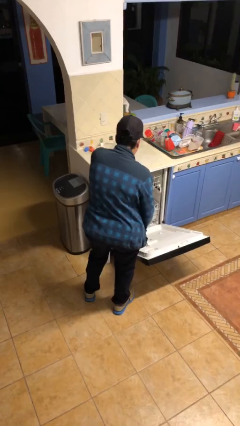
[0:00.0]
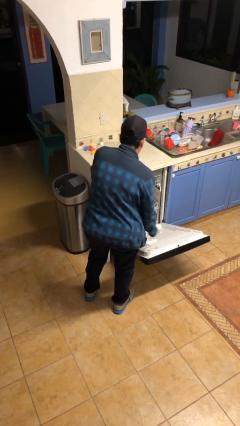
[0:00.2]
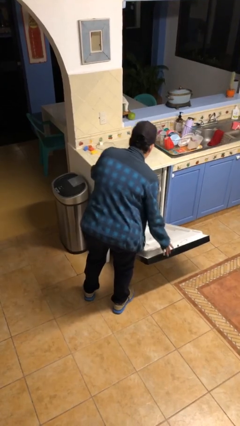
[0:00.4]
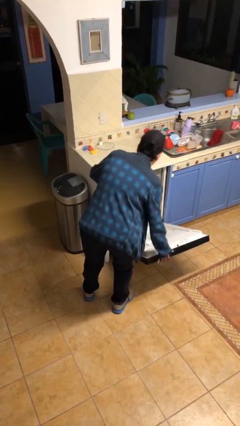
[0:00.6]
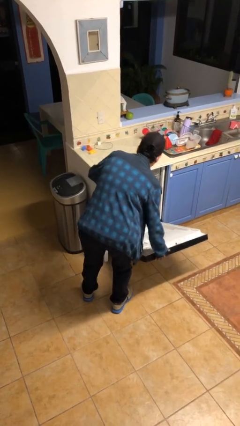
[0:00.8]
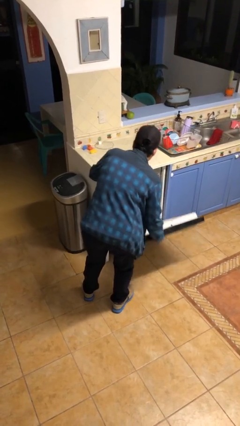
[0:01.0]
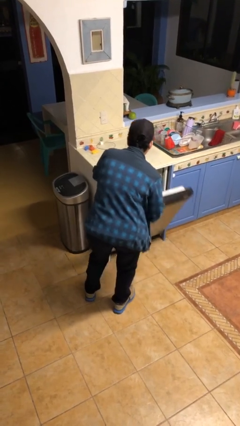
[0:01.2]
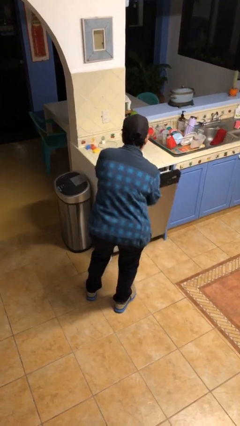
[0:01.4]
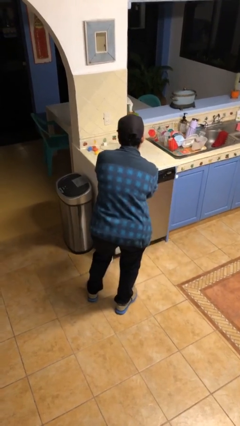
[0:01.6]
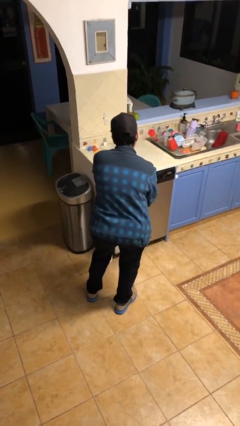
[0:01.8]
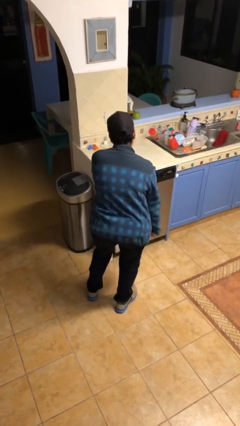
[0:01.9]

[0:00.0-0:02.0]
person closes dishwasher

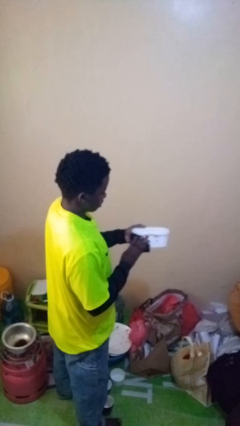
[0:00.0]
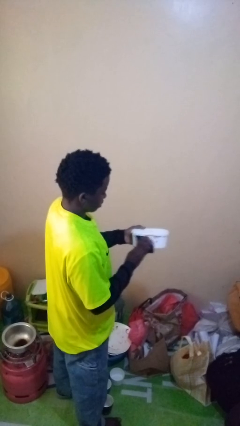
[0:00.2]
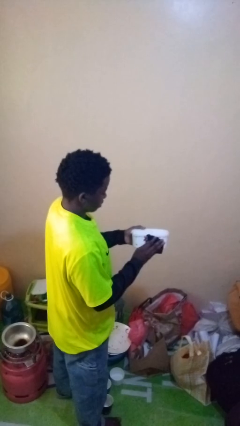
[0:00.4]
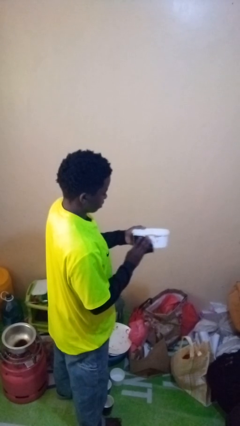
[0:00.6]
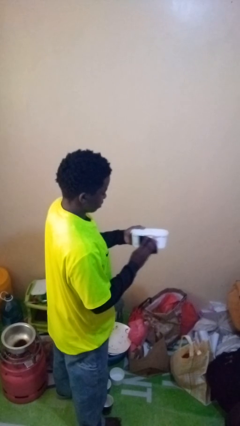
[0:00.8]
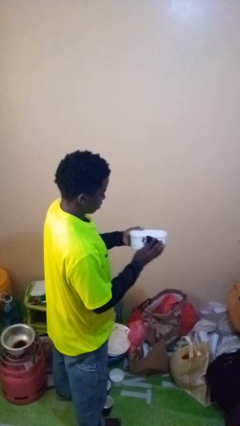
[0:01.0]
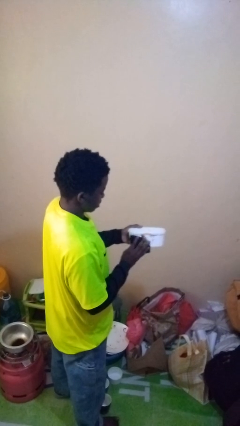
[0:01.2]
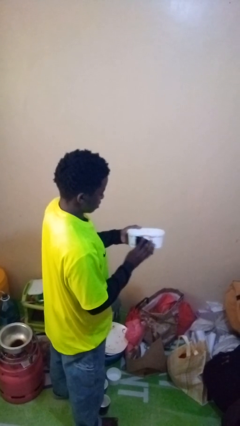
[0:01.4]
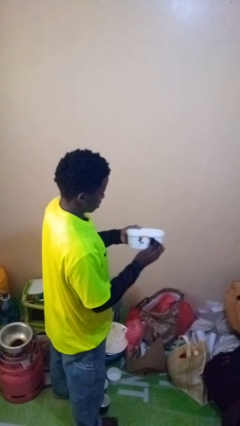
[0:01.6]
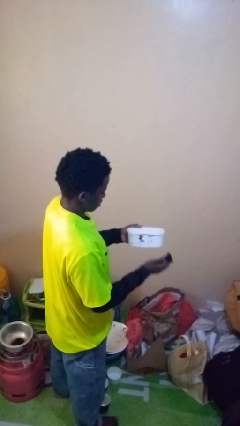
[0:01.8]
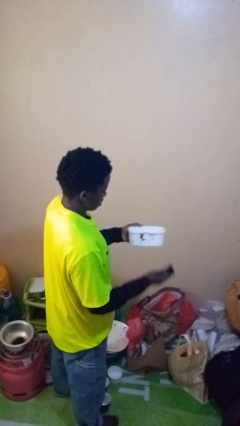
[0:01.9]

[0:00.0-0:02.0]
person washes dish

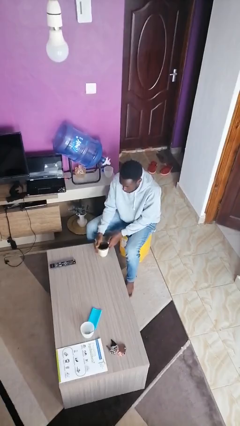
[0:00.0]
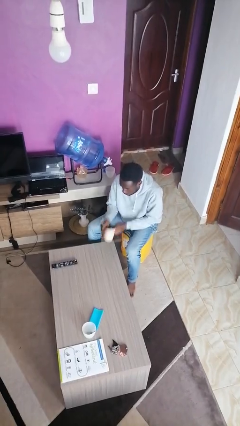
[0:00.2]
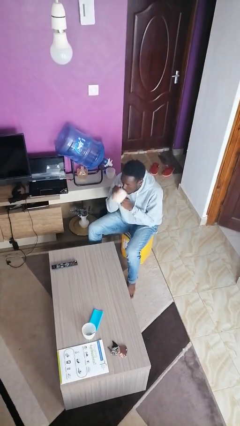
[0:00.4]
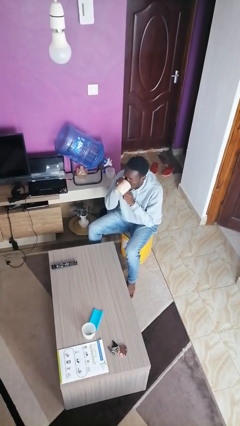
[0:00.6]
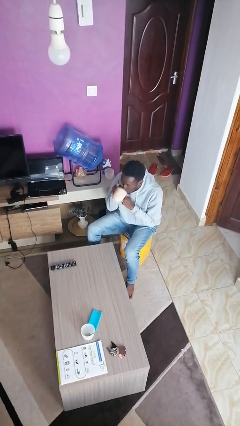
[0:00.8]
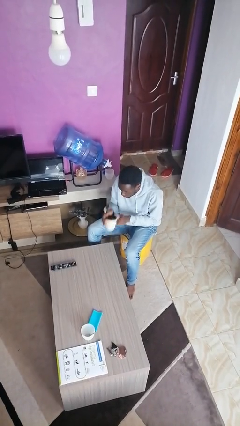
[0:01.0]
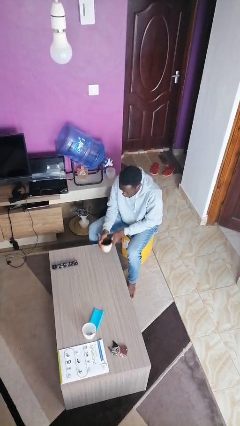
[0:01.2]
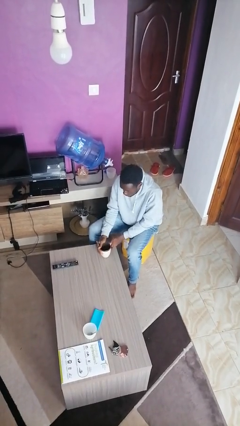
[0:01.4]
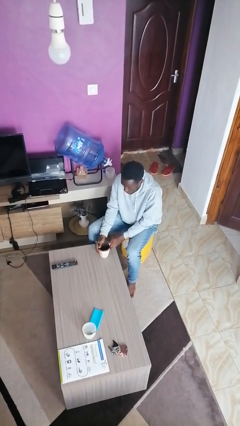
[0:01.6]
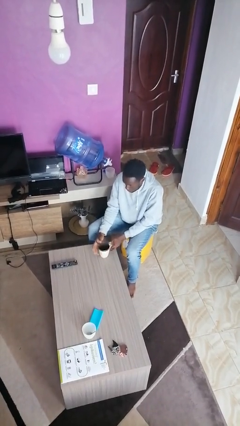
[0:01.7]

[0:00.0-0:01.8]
person drinks from mug

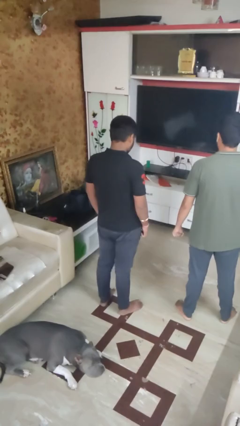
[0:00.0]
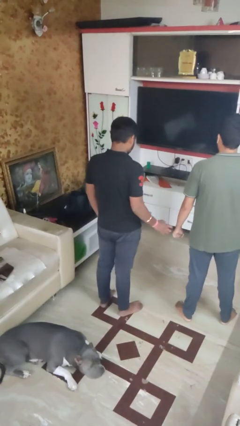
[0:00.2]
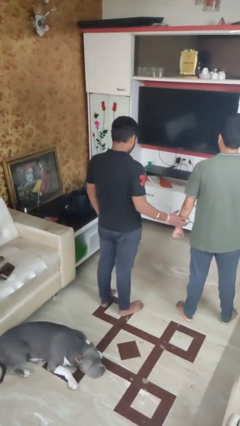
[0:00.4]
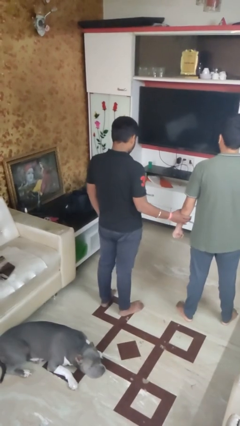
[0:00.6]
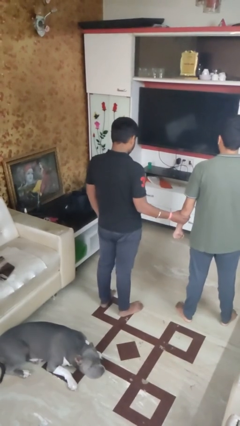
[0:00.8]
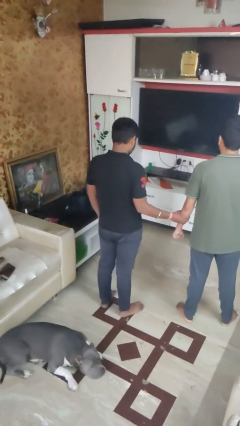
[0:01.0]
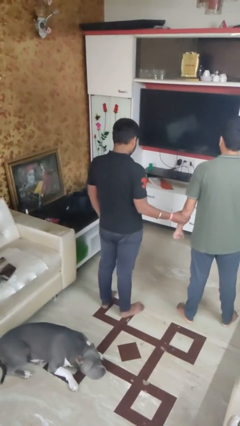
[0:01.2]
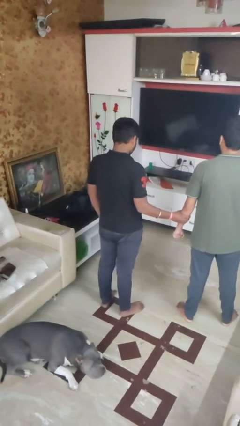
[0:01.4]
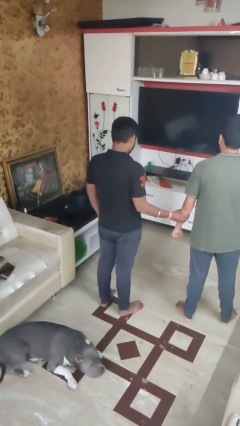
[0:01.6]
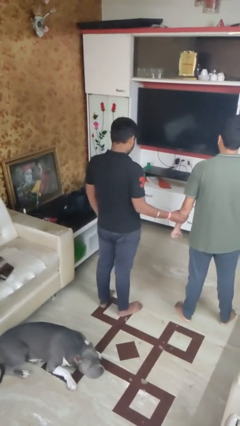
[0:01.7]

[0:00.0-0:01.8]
person grabs person by forearm

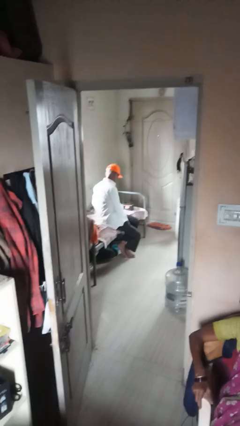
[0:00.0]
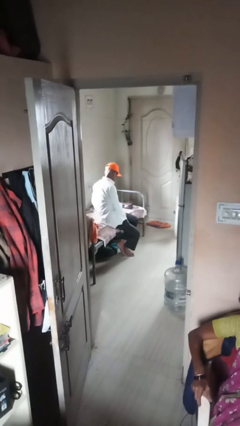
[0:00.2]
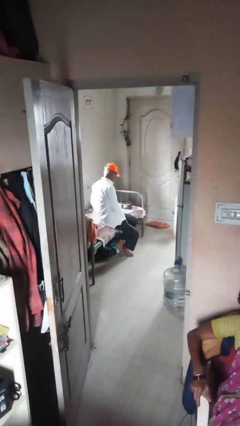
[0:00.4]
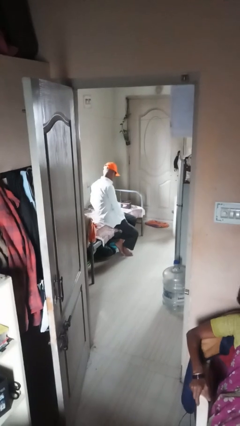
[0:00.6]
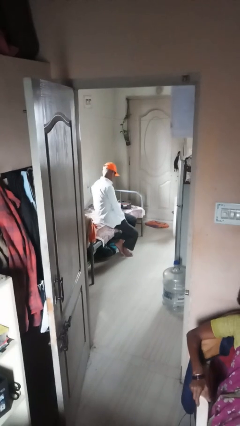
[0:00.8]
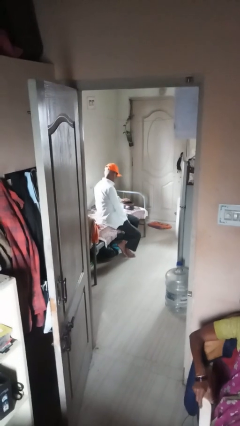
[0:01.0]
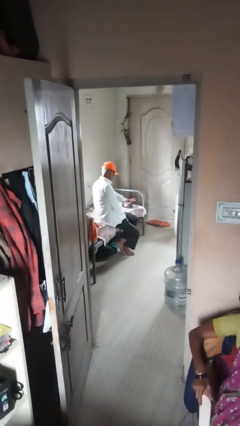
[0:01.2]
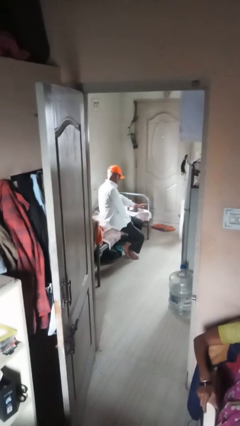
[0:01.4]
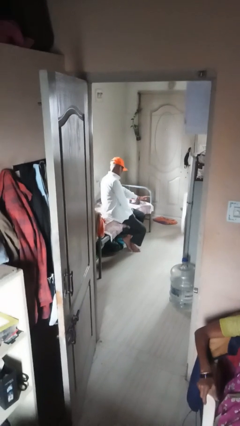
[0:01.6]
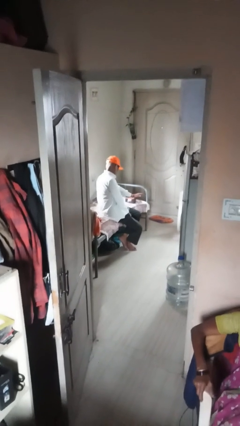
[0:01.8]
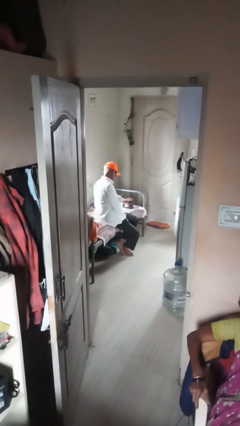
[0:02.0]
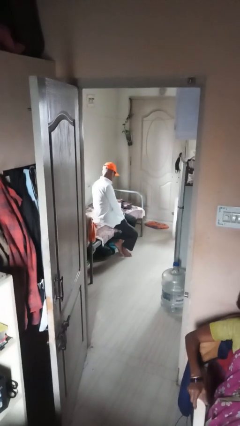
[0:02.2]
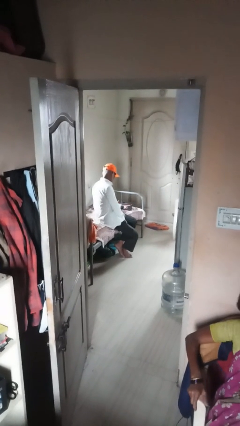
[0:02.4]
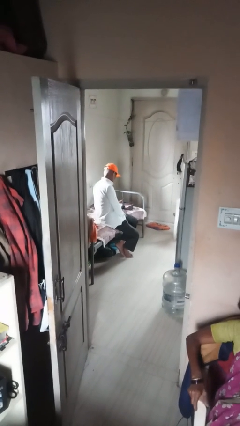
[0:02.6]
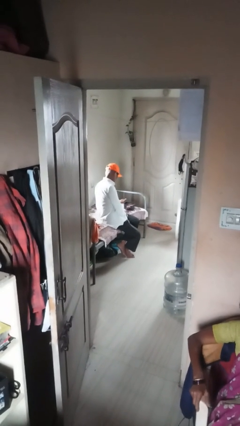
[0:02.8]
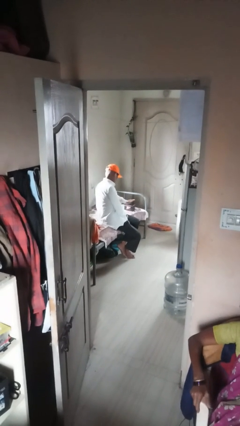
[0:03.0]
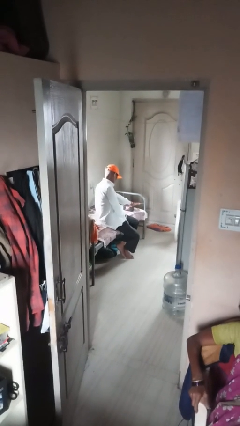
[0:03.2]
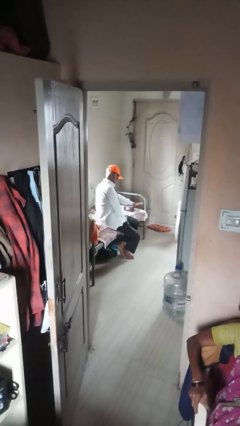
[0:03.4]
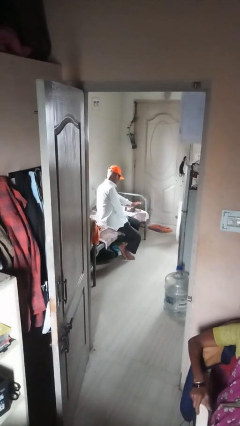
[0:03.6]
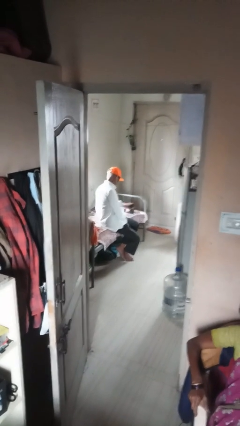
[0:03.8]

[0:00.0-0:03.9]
person waves hand over object

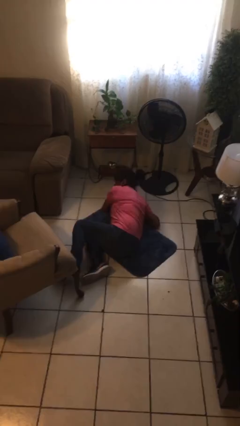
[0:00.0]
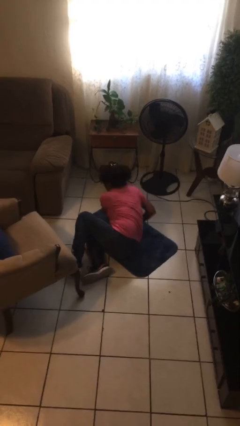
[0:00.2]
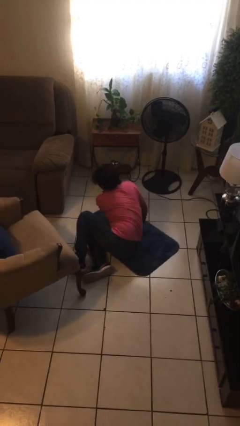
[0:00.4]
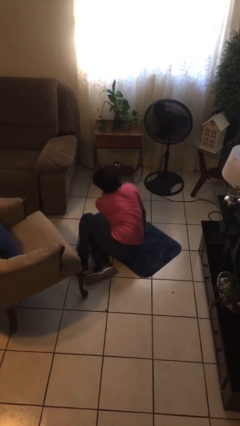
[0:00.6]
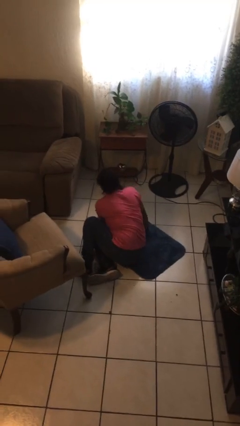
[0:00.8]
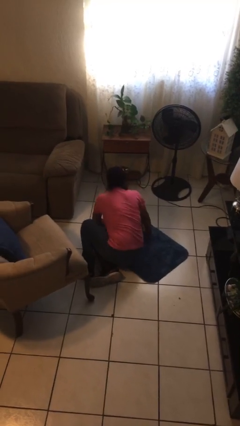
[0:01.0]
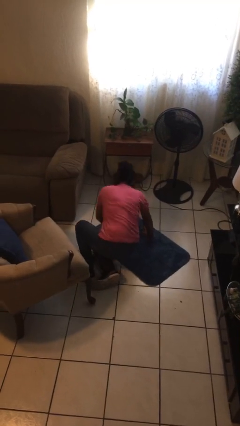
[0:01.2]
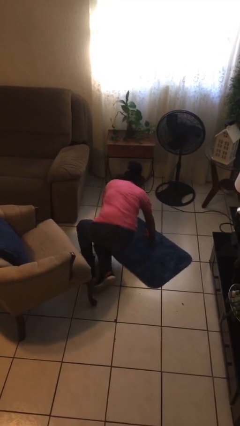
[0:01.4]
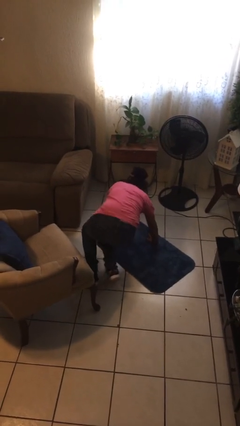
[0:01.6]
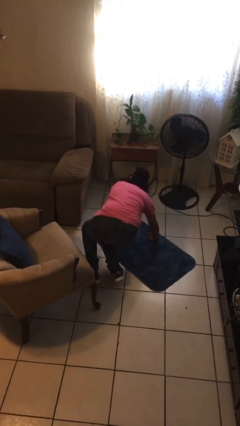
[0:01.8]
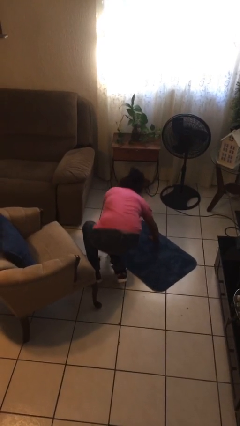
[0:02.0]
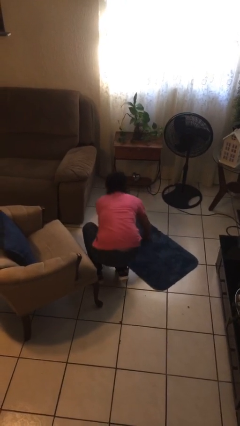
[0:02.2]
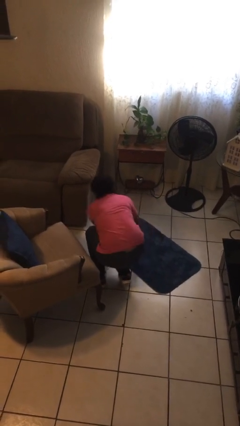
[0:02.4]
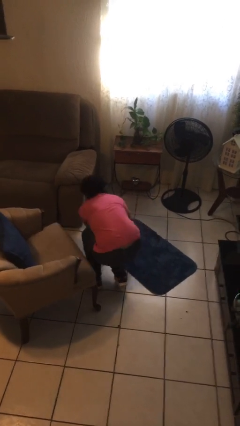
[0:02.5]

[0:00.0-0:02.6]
person stands up from floor

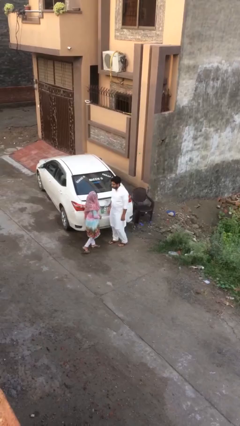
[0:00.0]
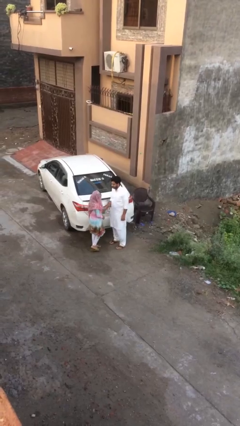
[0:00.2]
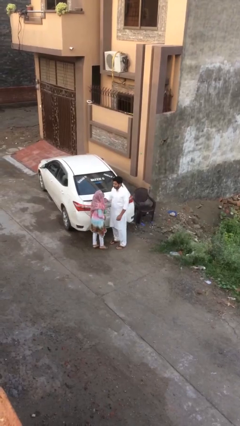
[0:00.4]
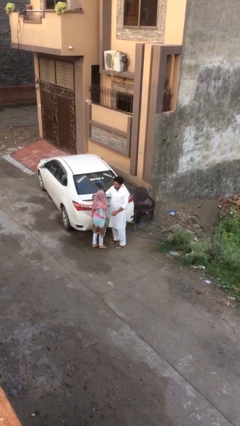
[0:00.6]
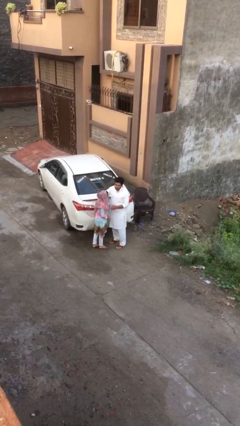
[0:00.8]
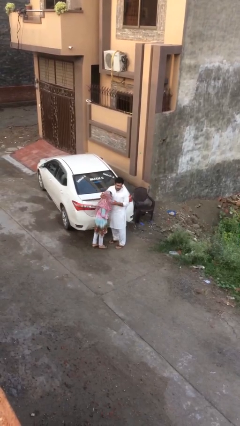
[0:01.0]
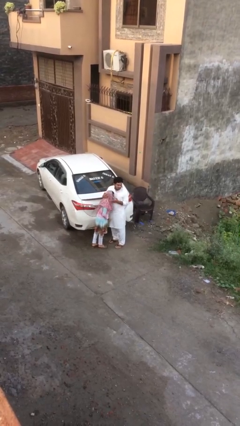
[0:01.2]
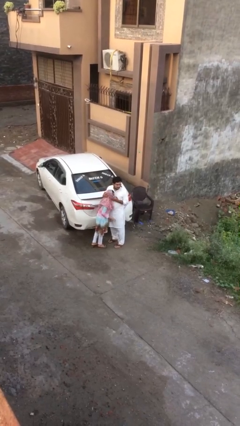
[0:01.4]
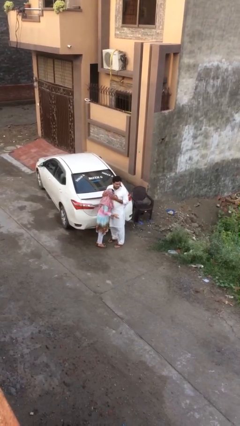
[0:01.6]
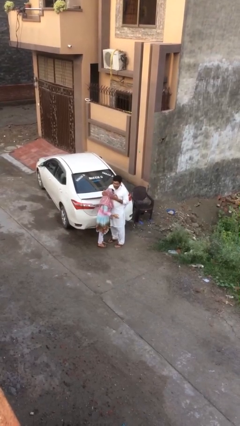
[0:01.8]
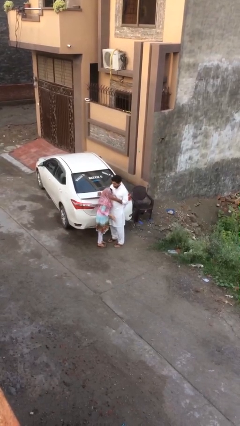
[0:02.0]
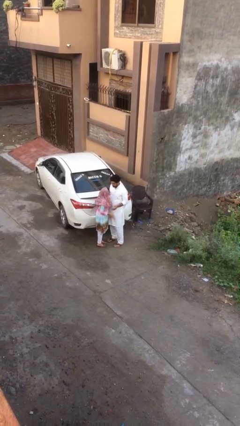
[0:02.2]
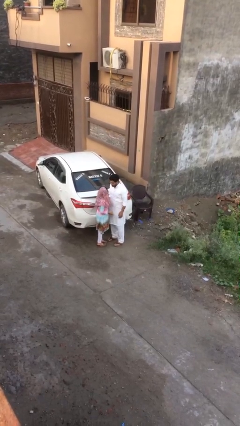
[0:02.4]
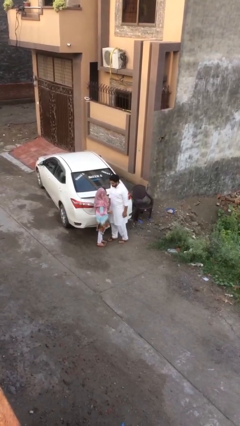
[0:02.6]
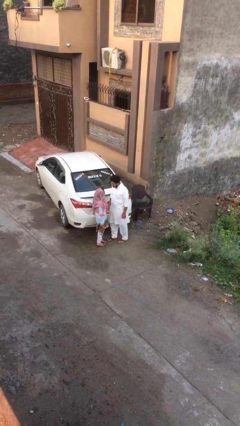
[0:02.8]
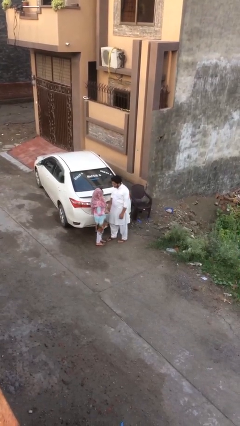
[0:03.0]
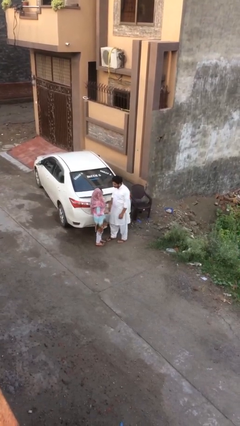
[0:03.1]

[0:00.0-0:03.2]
person embraces person
